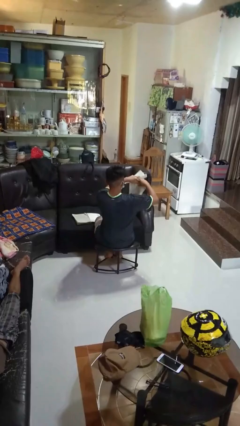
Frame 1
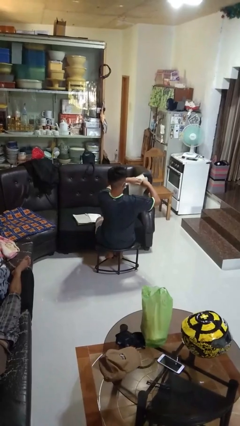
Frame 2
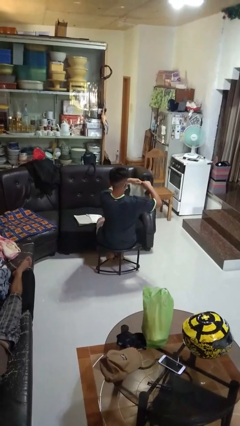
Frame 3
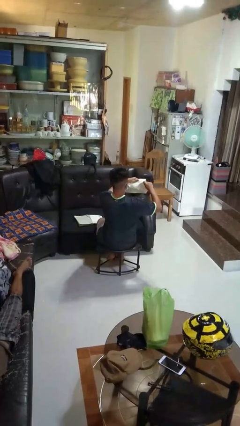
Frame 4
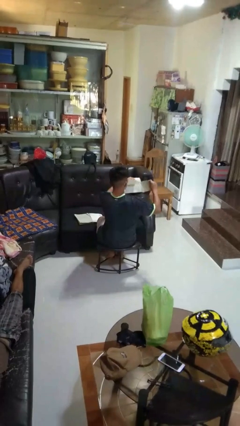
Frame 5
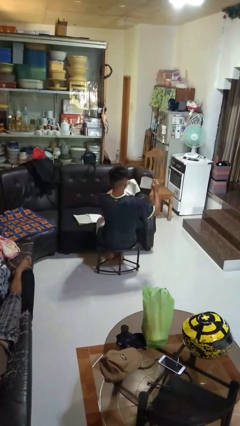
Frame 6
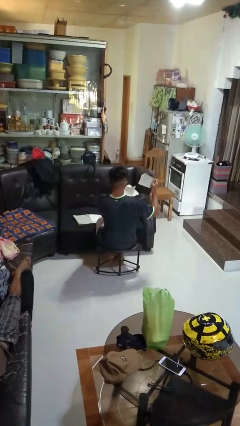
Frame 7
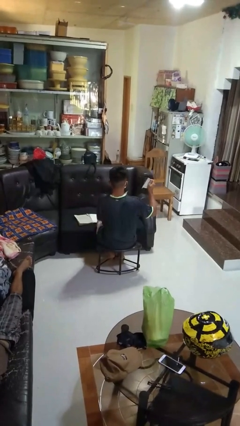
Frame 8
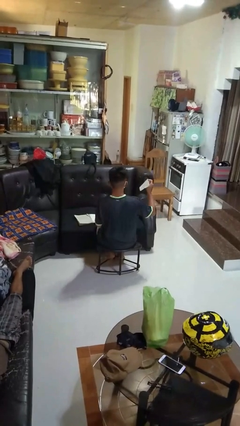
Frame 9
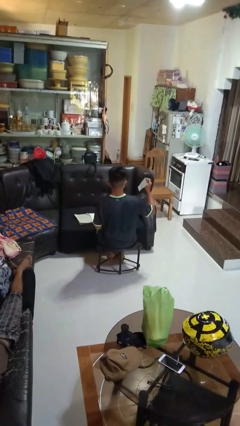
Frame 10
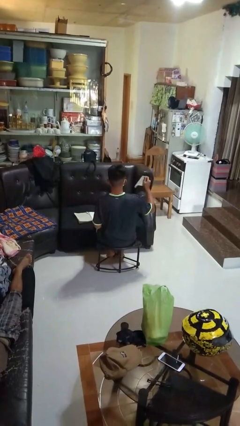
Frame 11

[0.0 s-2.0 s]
person tears paper

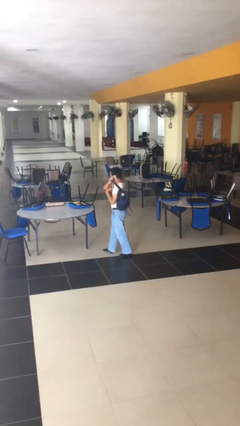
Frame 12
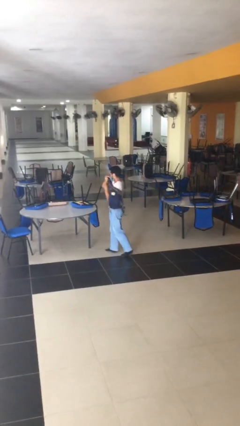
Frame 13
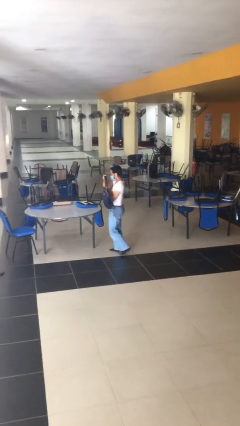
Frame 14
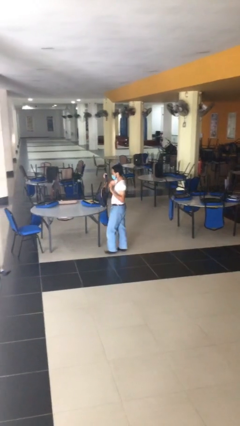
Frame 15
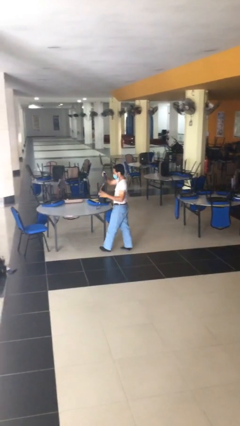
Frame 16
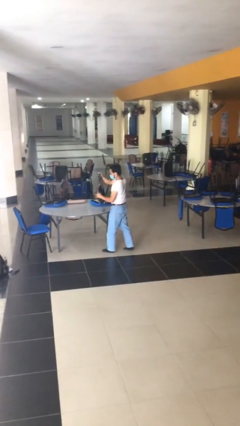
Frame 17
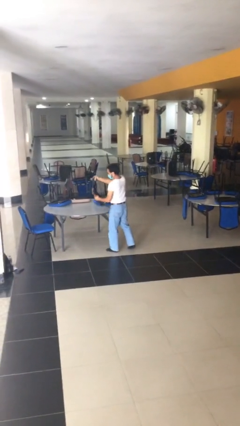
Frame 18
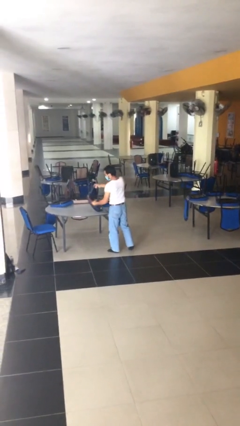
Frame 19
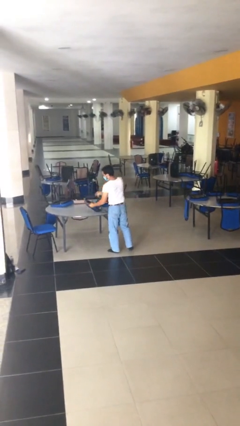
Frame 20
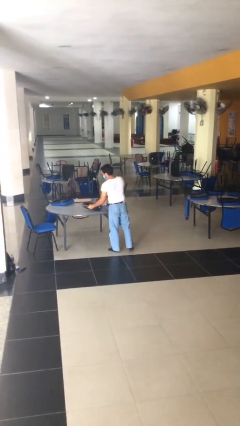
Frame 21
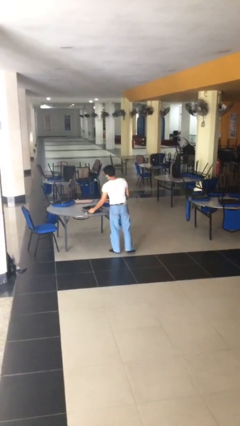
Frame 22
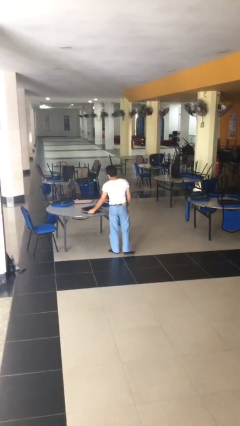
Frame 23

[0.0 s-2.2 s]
person puts down object on table

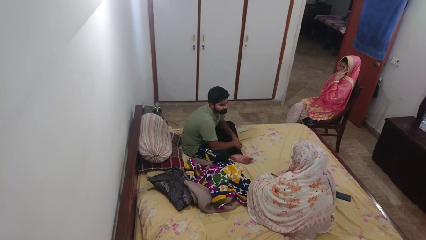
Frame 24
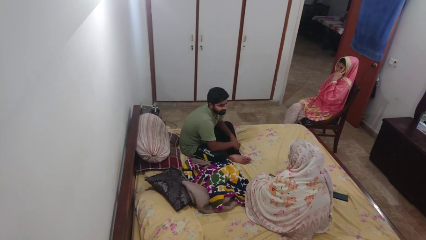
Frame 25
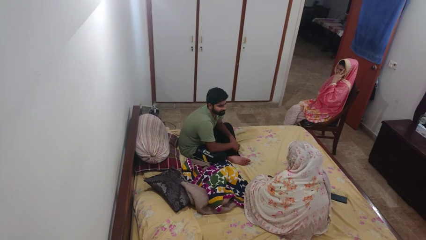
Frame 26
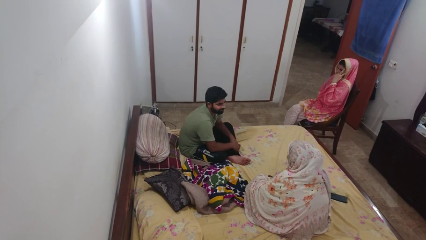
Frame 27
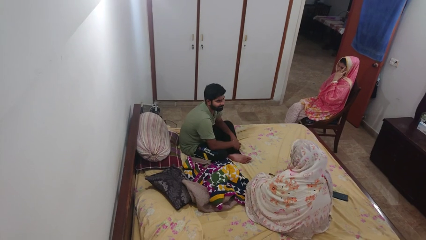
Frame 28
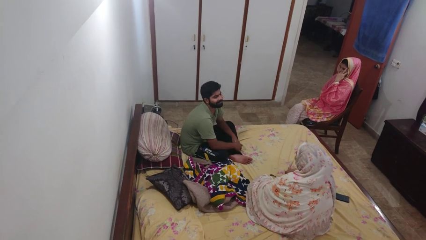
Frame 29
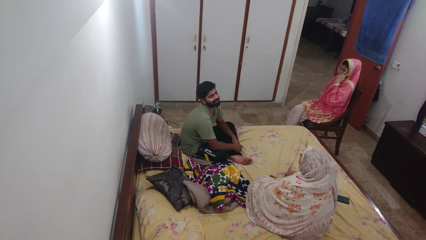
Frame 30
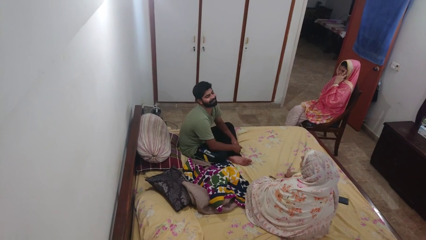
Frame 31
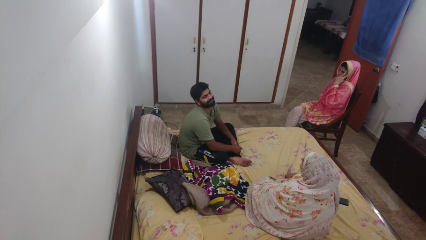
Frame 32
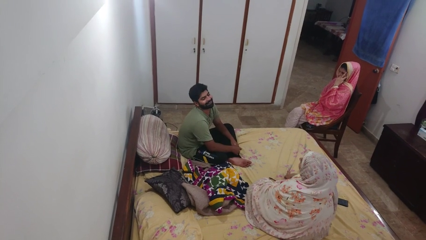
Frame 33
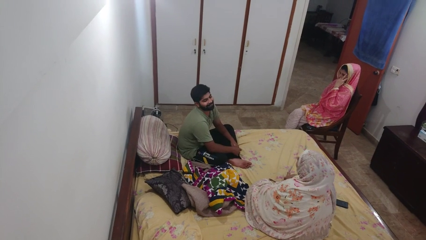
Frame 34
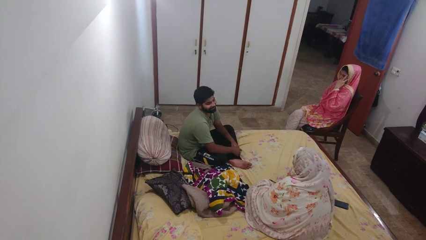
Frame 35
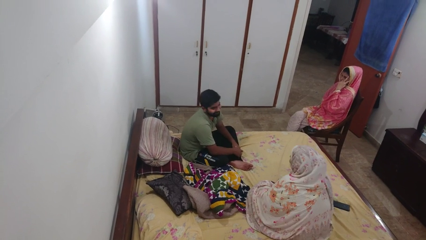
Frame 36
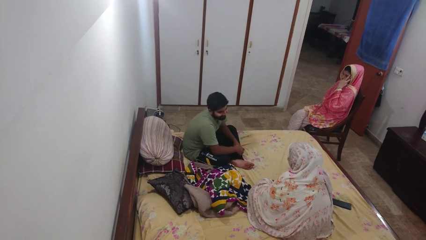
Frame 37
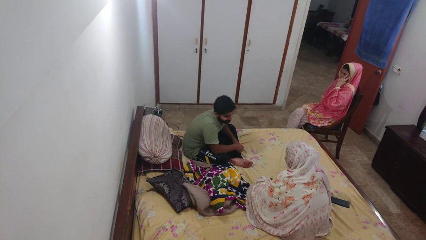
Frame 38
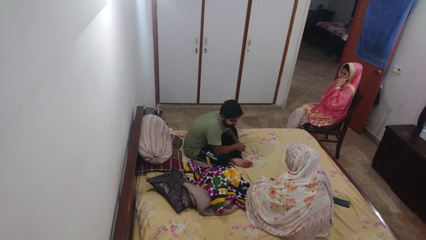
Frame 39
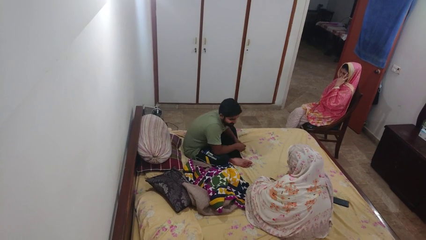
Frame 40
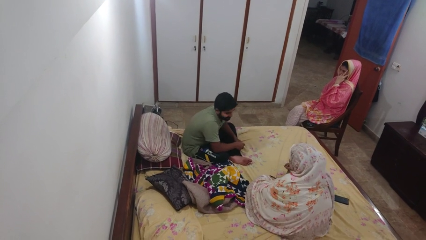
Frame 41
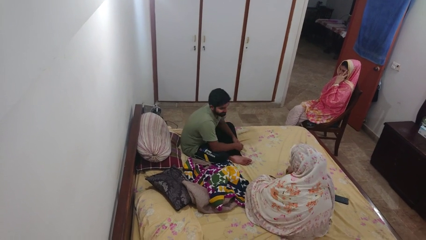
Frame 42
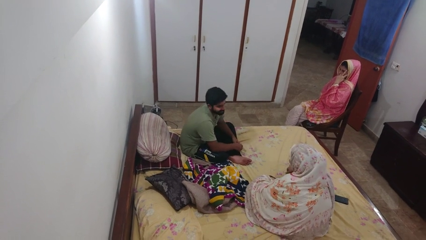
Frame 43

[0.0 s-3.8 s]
person laughs with person

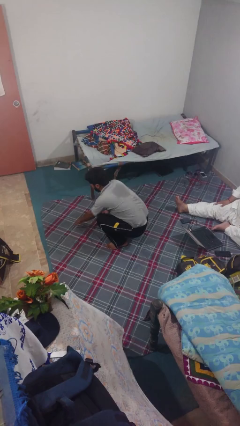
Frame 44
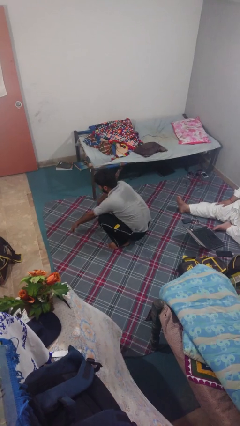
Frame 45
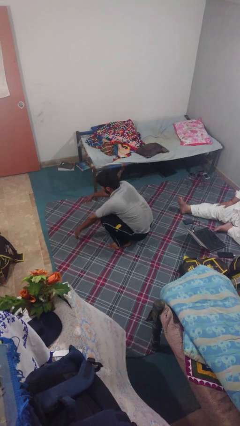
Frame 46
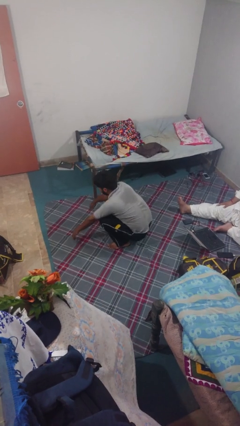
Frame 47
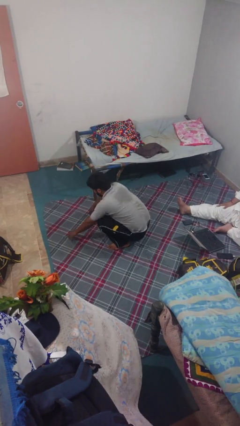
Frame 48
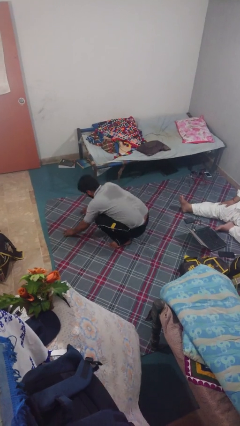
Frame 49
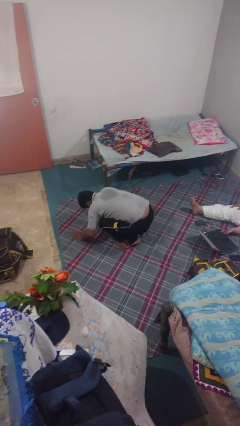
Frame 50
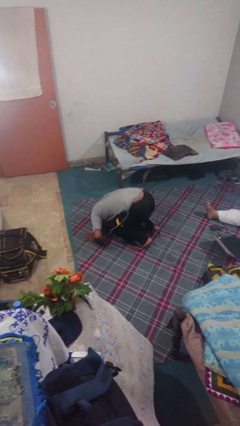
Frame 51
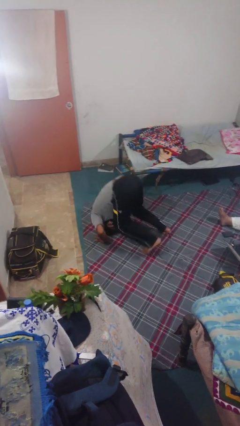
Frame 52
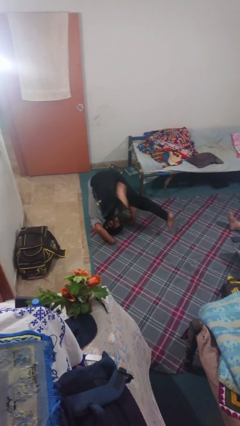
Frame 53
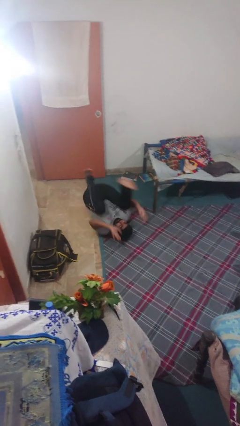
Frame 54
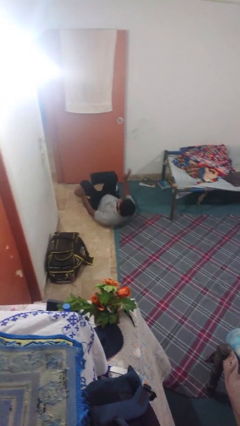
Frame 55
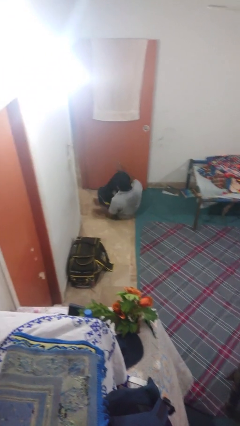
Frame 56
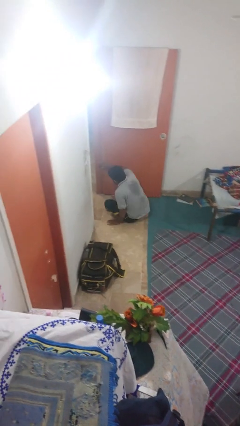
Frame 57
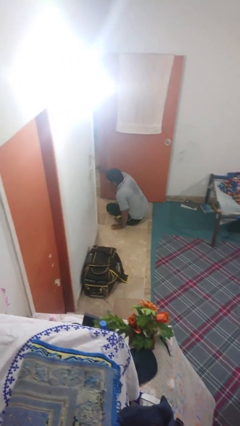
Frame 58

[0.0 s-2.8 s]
person somersaults

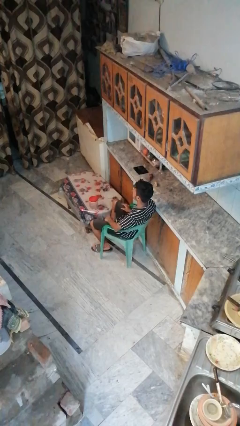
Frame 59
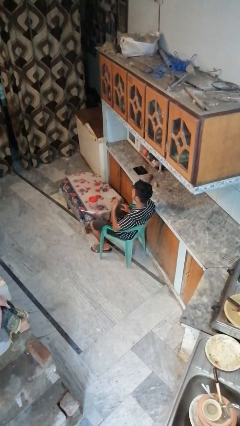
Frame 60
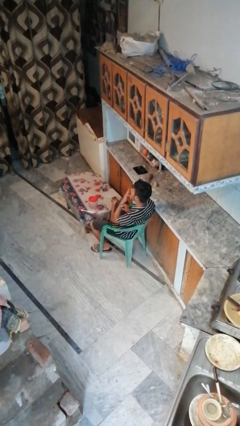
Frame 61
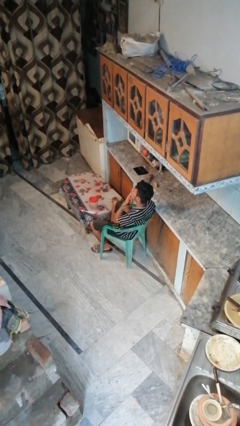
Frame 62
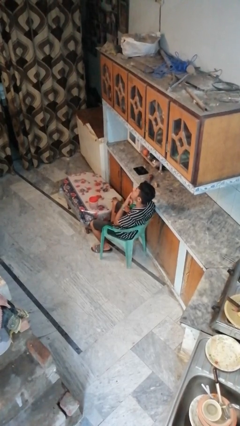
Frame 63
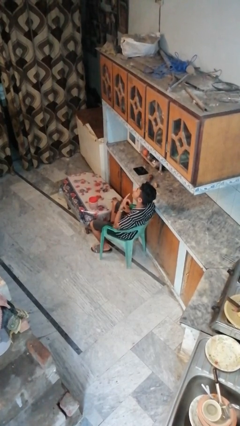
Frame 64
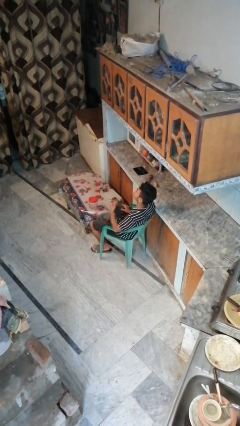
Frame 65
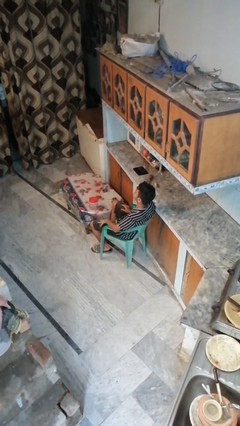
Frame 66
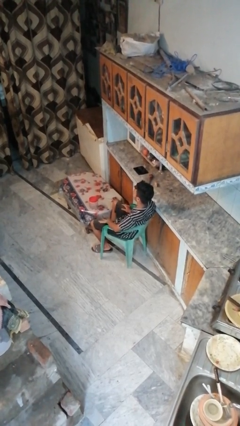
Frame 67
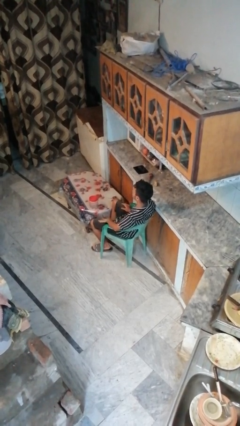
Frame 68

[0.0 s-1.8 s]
person licks fingers

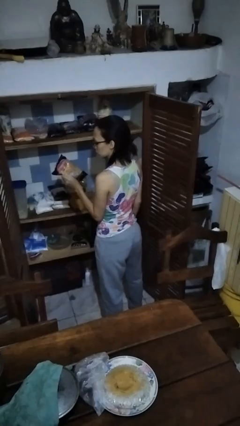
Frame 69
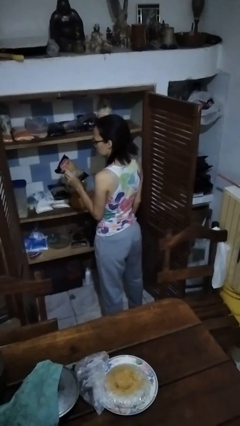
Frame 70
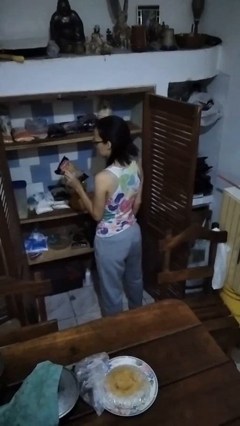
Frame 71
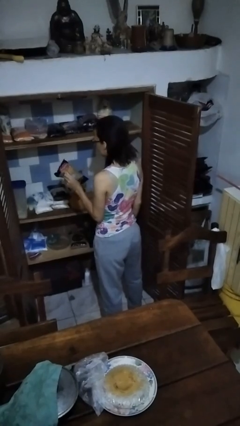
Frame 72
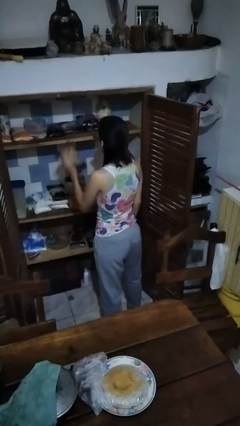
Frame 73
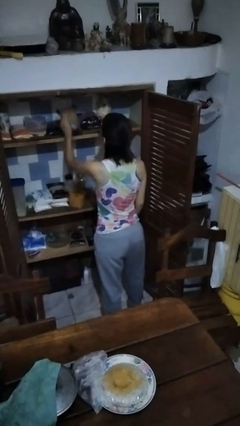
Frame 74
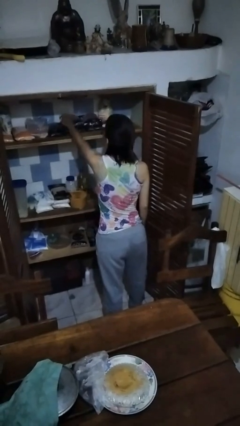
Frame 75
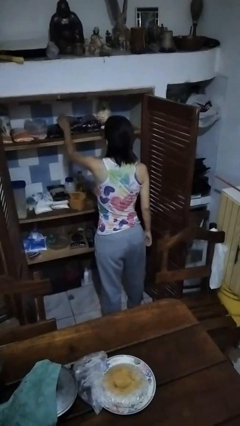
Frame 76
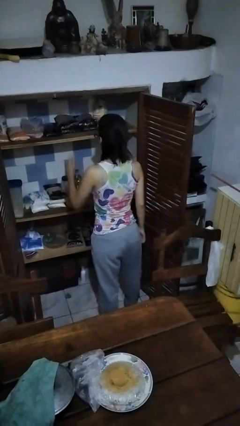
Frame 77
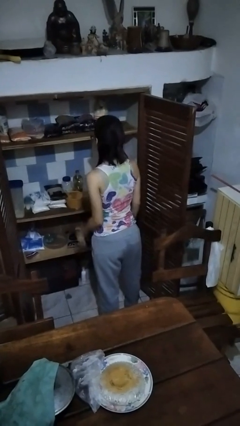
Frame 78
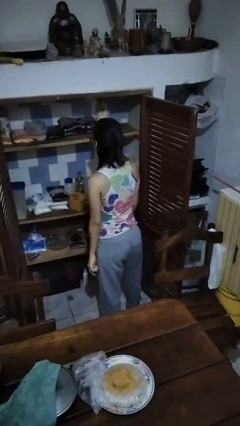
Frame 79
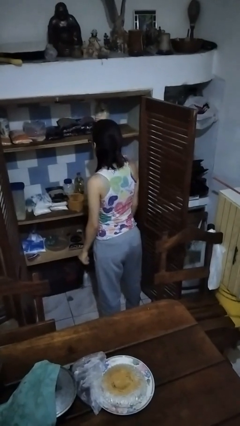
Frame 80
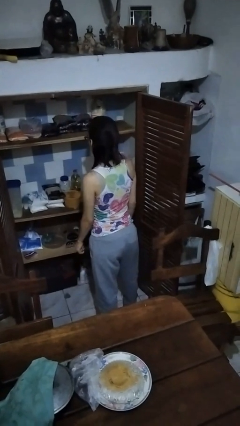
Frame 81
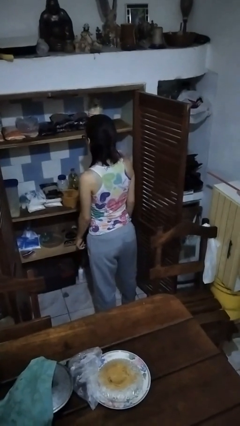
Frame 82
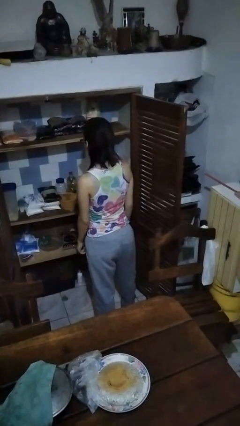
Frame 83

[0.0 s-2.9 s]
person puts object in cabinet

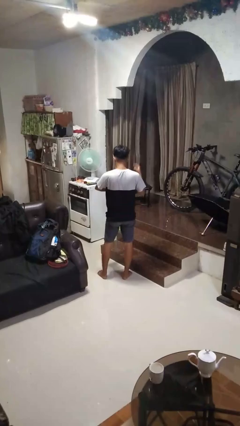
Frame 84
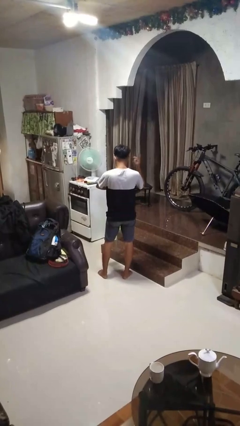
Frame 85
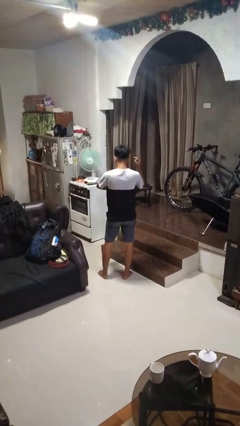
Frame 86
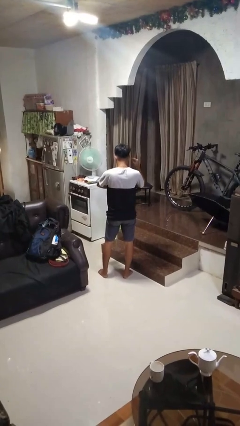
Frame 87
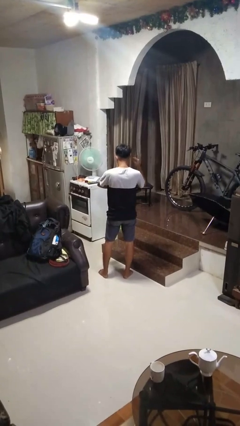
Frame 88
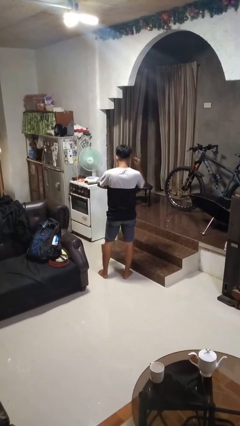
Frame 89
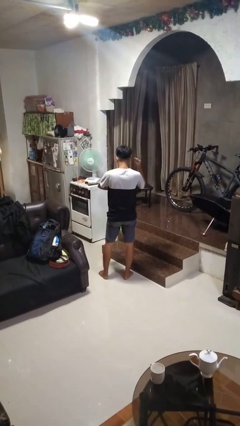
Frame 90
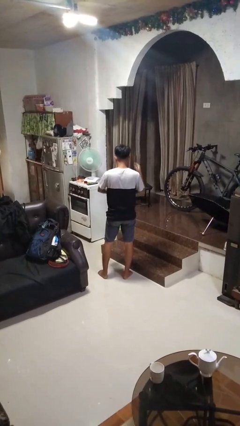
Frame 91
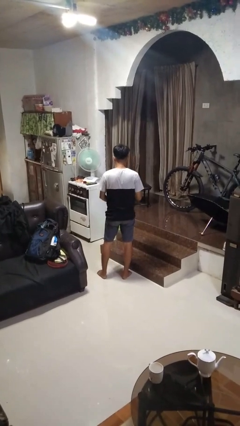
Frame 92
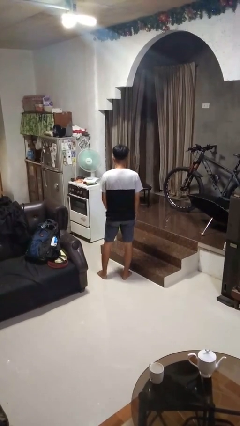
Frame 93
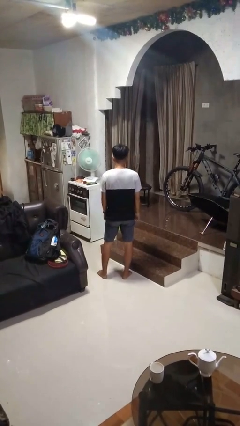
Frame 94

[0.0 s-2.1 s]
person gestures listen closely
